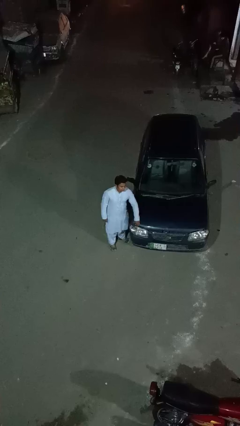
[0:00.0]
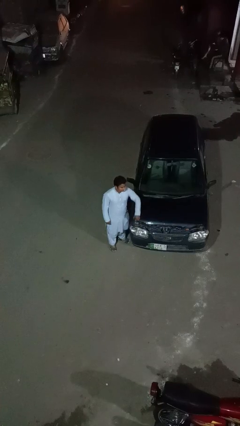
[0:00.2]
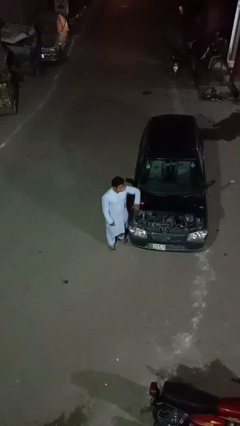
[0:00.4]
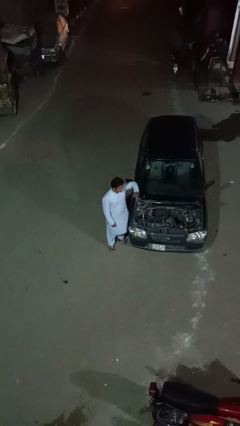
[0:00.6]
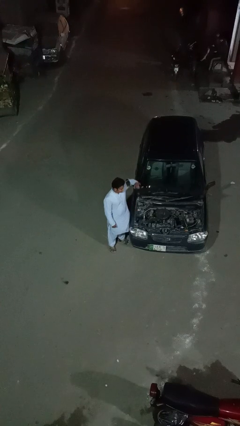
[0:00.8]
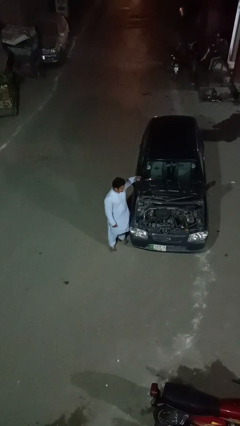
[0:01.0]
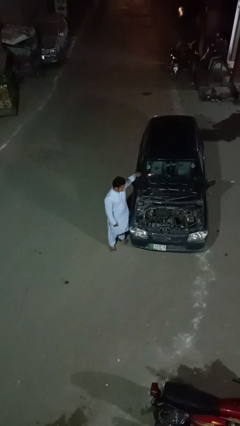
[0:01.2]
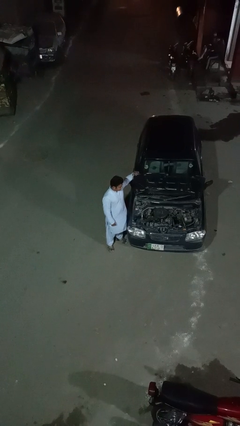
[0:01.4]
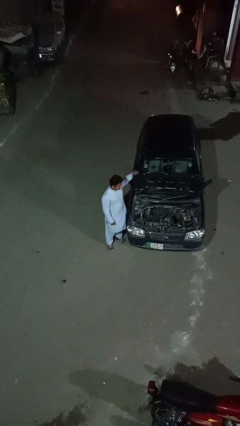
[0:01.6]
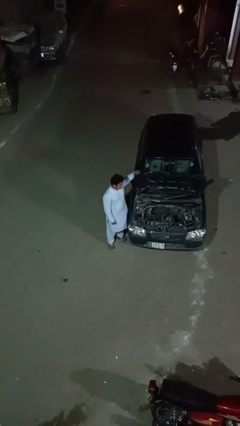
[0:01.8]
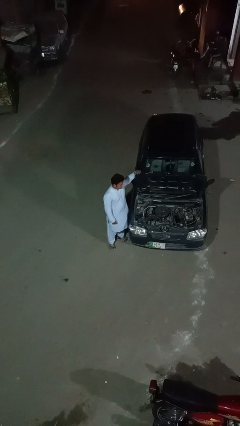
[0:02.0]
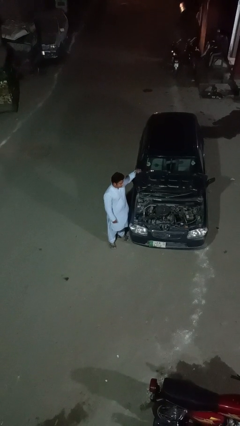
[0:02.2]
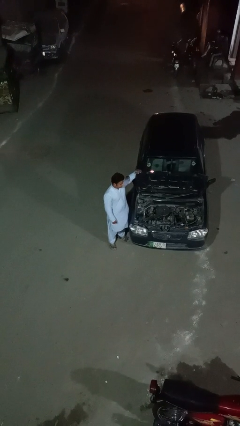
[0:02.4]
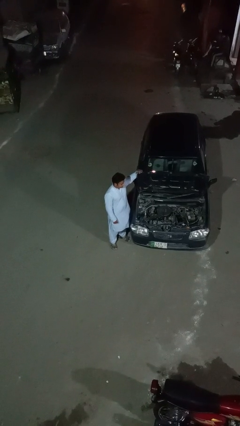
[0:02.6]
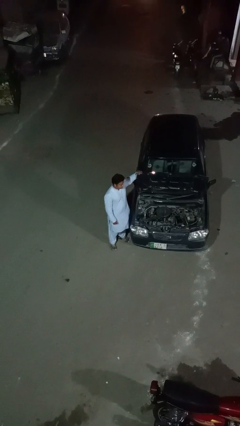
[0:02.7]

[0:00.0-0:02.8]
person opens car hood

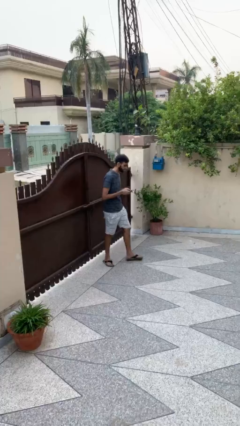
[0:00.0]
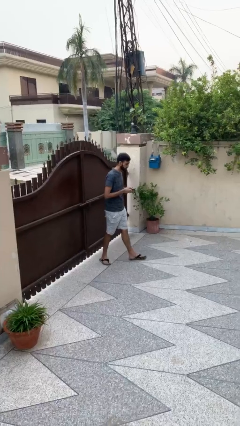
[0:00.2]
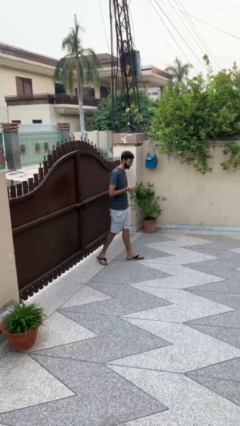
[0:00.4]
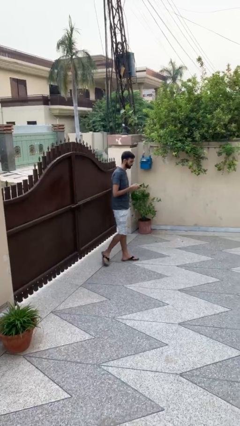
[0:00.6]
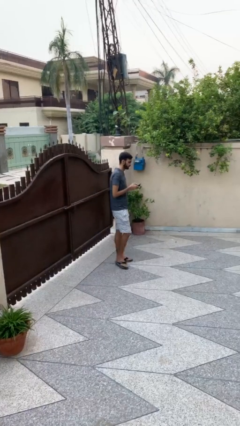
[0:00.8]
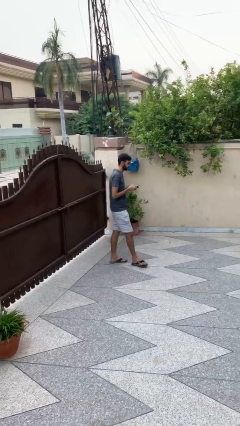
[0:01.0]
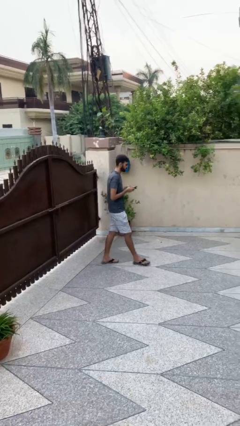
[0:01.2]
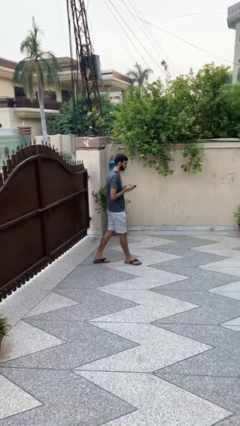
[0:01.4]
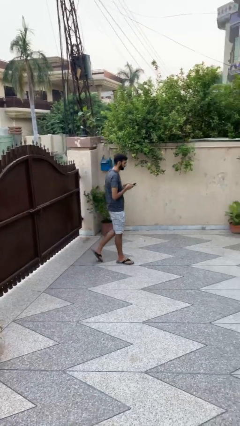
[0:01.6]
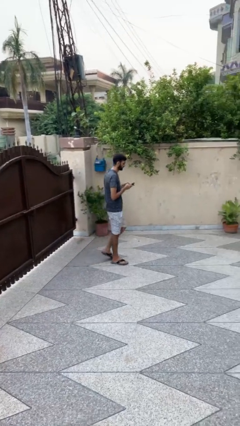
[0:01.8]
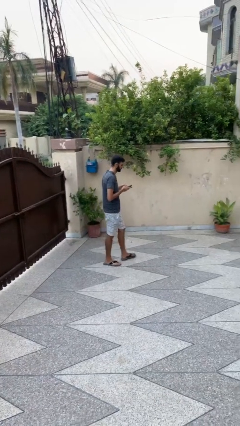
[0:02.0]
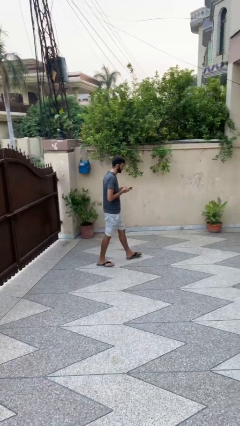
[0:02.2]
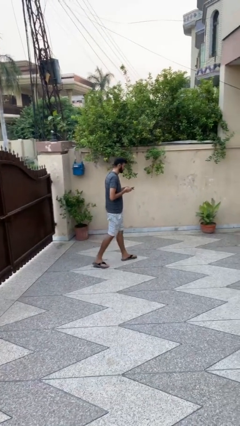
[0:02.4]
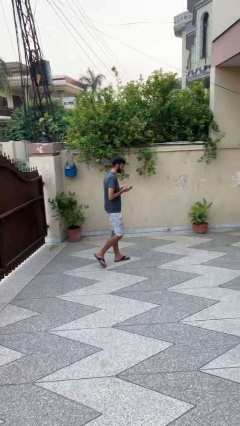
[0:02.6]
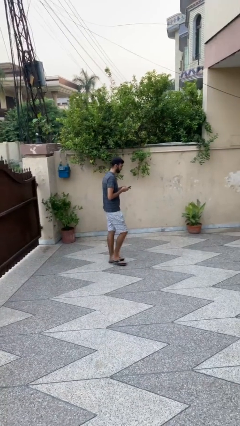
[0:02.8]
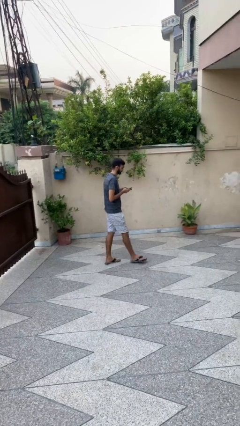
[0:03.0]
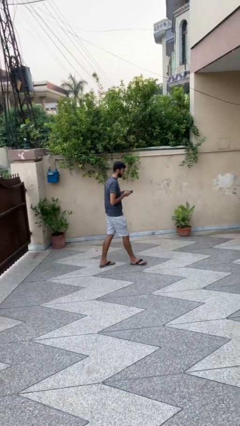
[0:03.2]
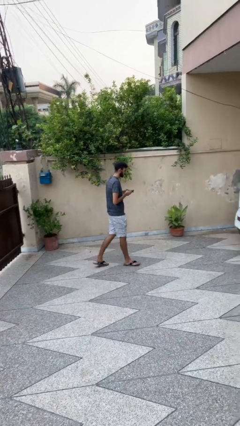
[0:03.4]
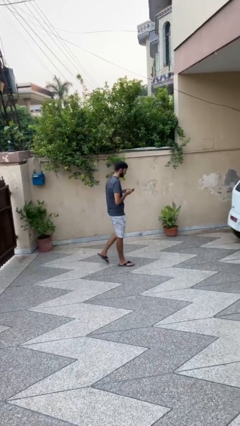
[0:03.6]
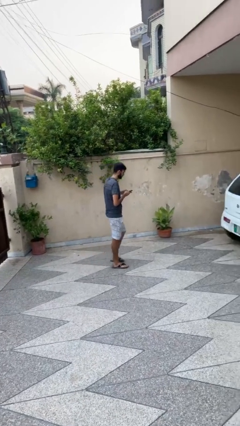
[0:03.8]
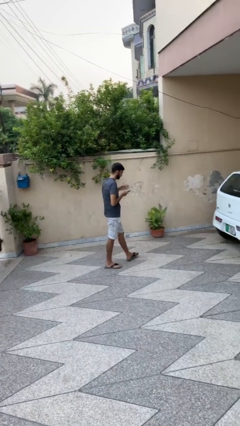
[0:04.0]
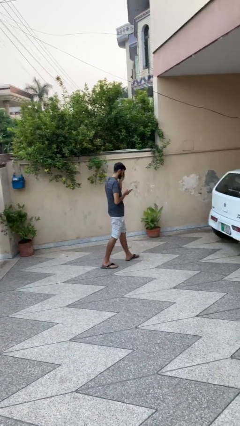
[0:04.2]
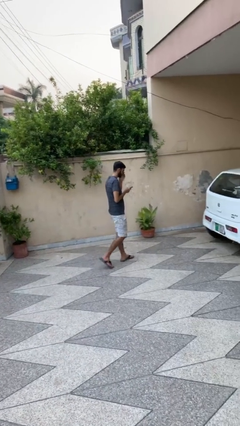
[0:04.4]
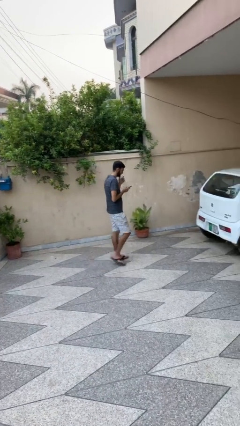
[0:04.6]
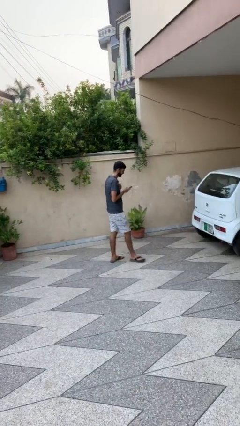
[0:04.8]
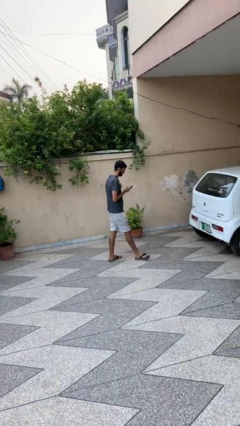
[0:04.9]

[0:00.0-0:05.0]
person texts on phone

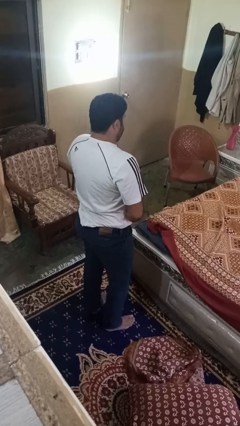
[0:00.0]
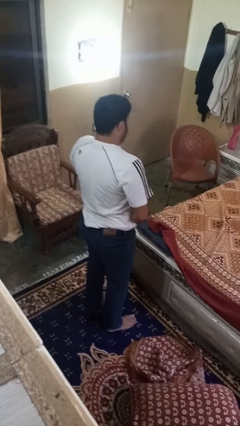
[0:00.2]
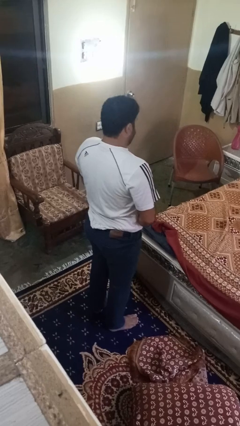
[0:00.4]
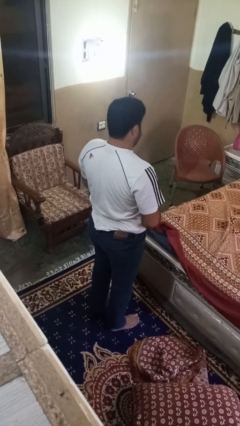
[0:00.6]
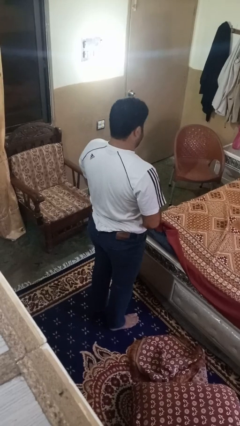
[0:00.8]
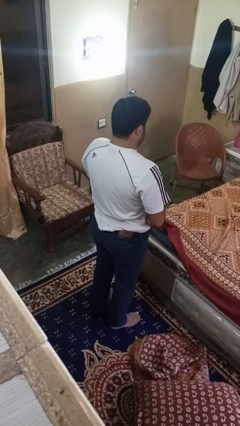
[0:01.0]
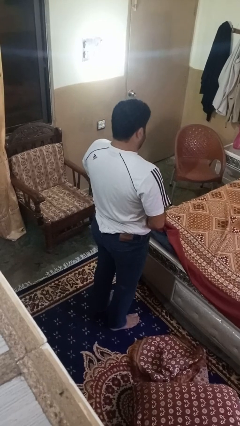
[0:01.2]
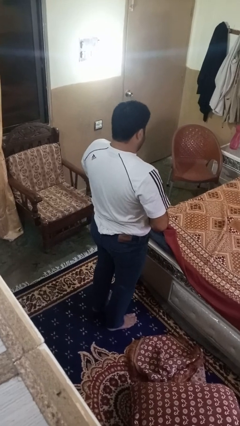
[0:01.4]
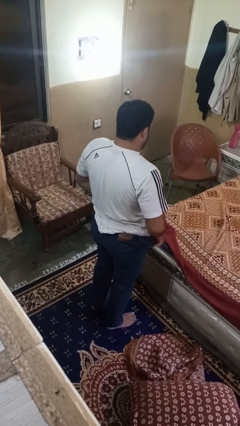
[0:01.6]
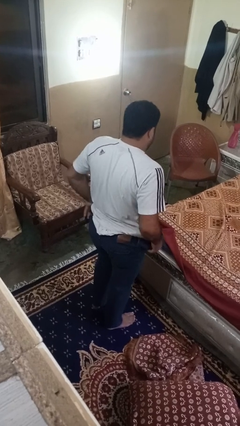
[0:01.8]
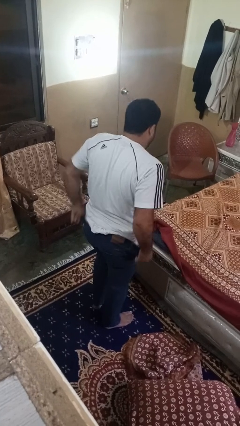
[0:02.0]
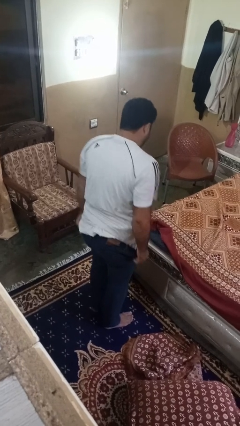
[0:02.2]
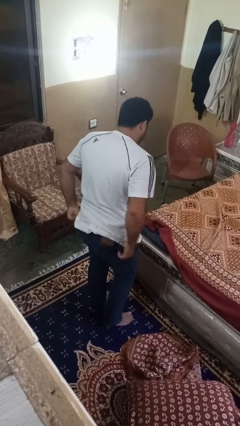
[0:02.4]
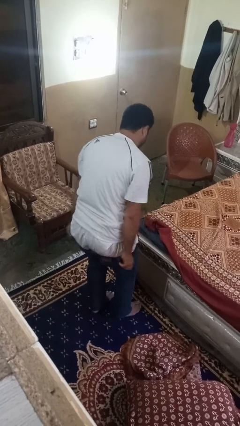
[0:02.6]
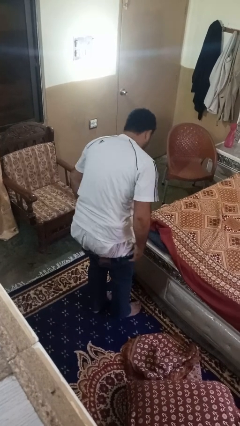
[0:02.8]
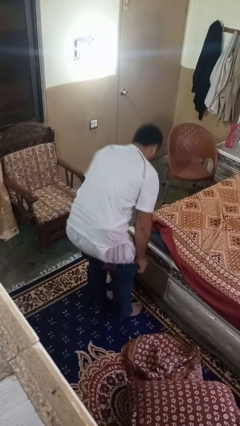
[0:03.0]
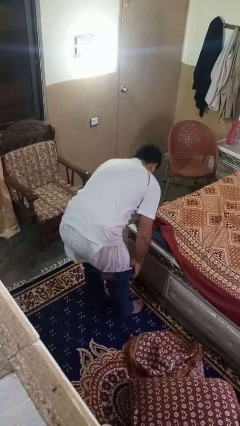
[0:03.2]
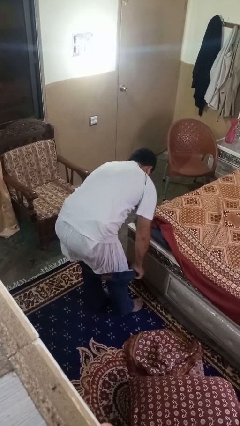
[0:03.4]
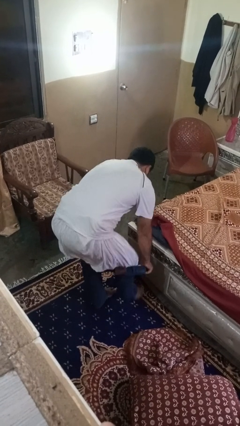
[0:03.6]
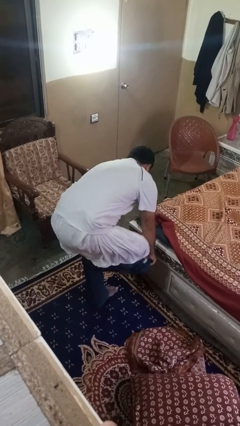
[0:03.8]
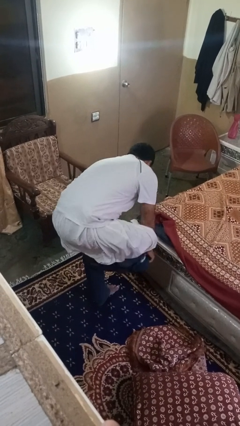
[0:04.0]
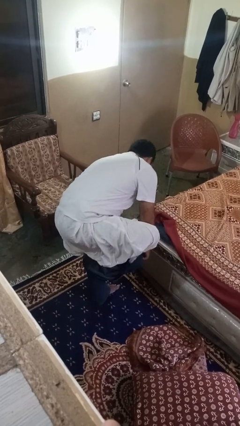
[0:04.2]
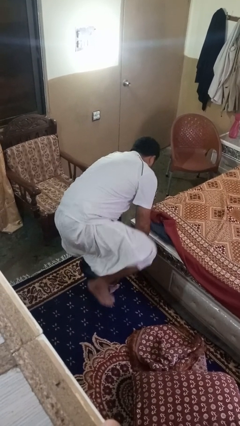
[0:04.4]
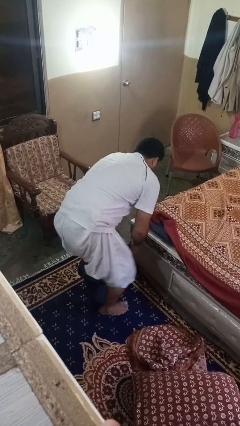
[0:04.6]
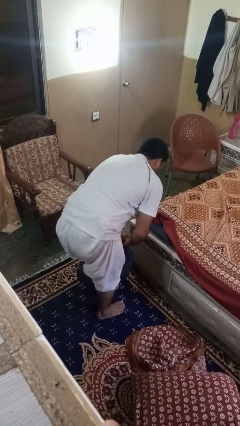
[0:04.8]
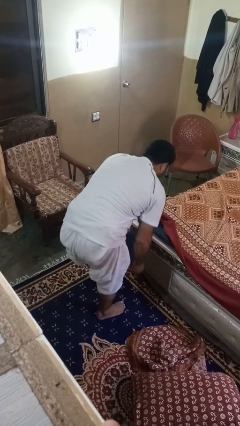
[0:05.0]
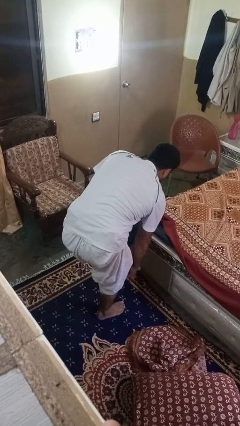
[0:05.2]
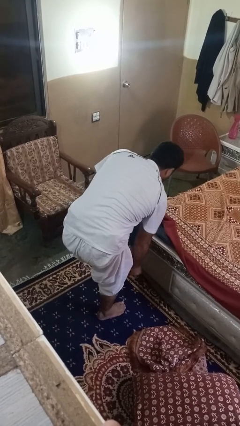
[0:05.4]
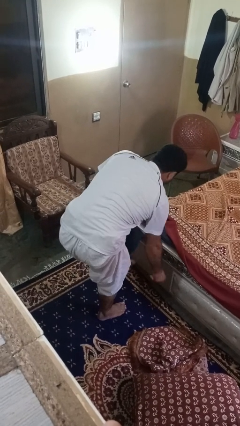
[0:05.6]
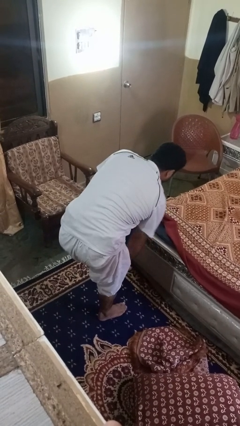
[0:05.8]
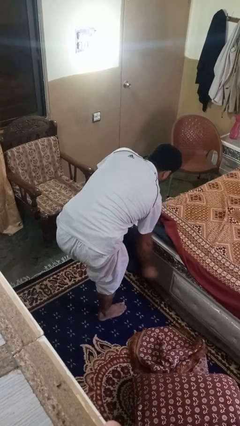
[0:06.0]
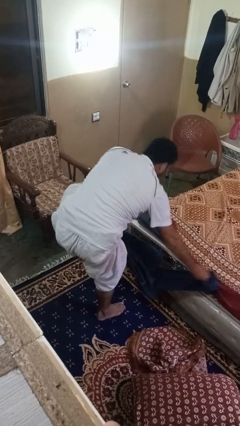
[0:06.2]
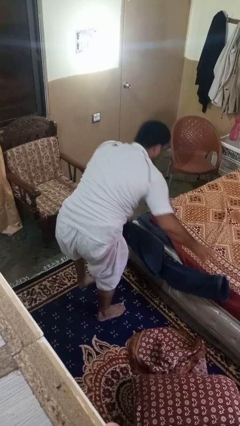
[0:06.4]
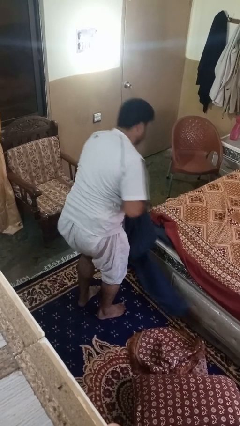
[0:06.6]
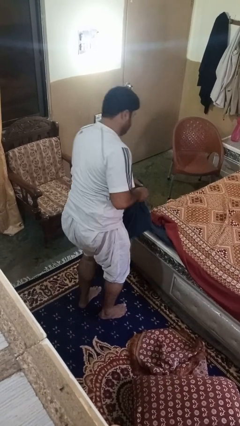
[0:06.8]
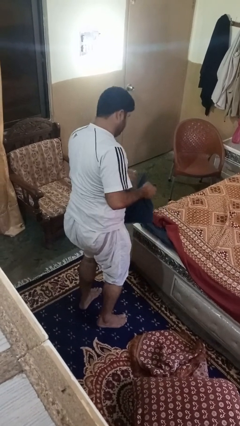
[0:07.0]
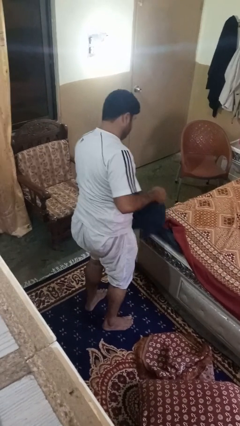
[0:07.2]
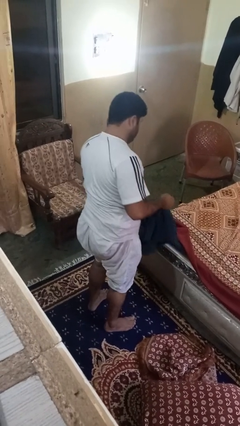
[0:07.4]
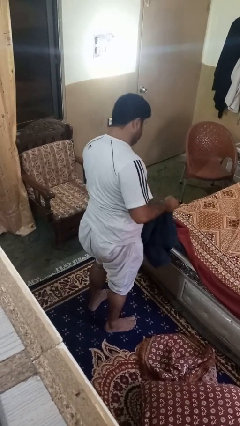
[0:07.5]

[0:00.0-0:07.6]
person takes off pants

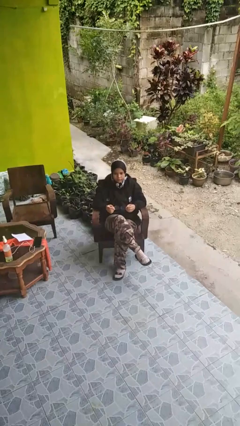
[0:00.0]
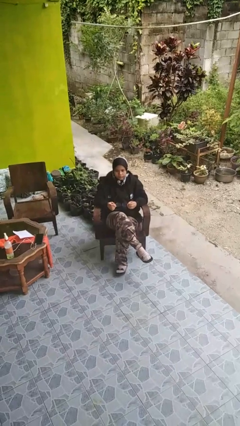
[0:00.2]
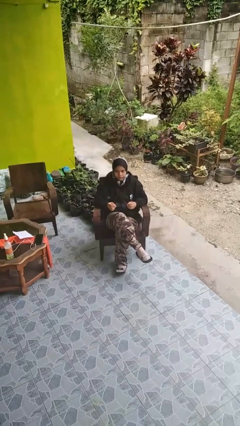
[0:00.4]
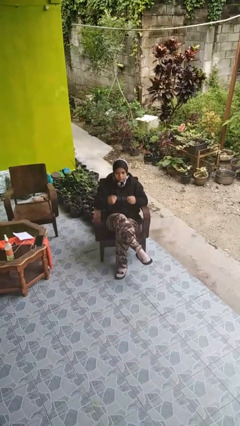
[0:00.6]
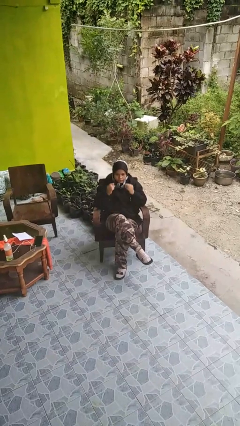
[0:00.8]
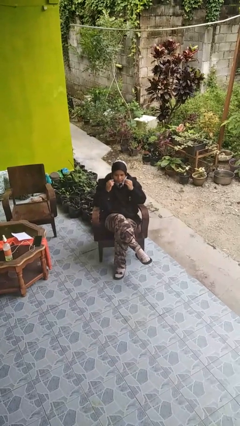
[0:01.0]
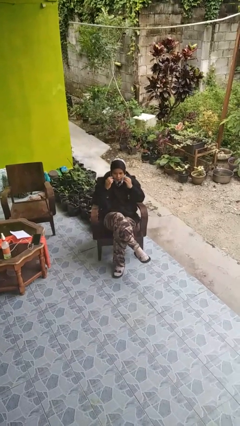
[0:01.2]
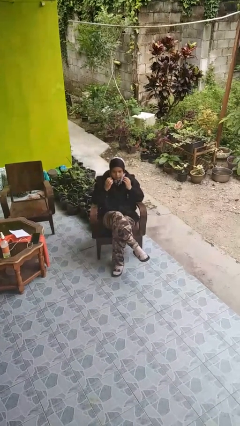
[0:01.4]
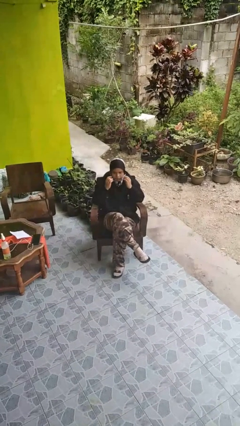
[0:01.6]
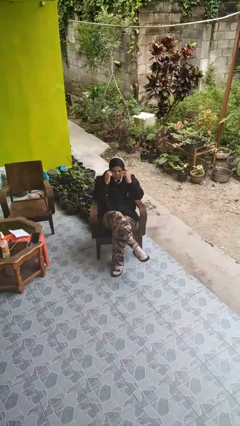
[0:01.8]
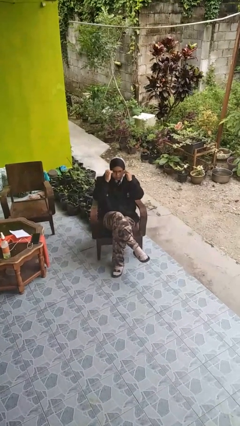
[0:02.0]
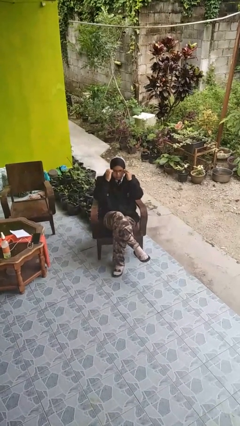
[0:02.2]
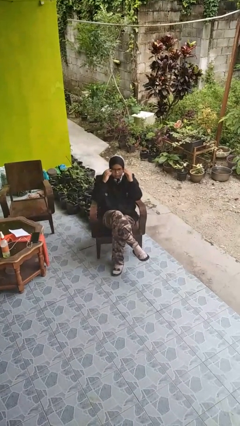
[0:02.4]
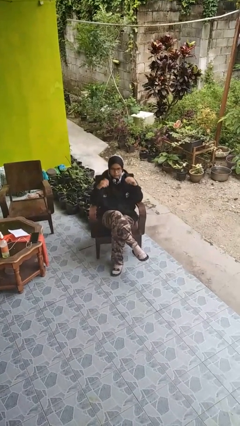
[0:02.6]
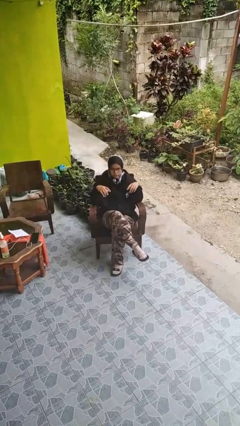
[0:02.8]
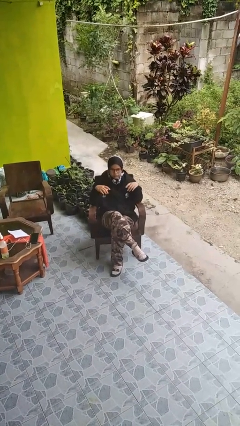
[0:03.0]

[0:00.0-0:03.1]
person puts on glasses
